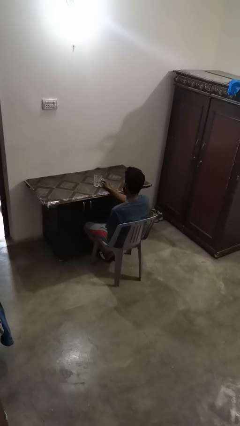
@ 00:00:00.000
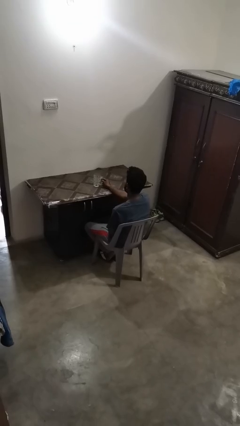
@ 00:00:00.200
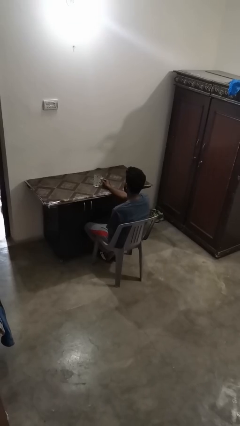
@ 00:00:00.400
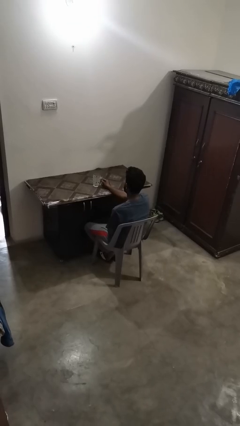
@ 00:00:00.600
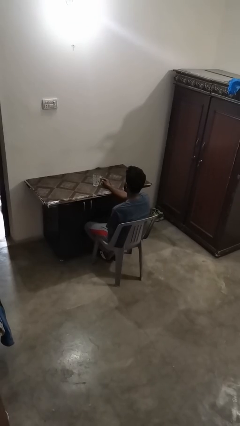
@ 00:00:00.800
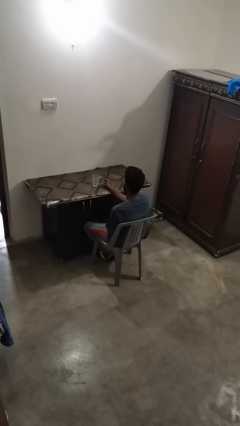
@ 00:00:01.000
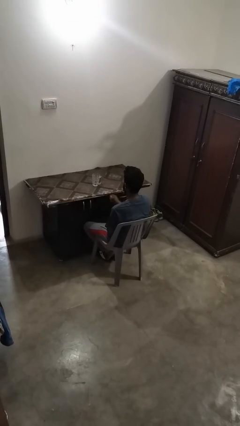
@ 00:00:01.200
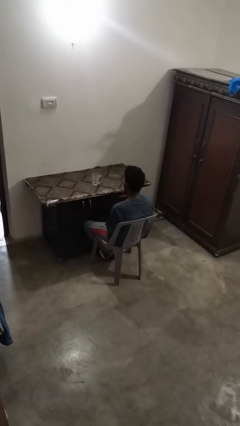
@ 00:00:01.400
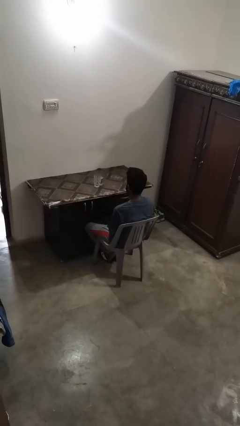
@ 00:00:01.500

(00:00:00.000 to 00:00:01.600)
person sets upright glass

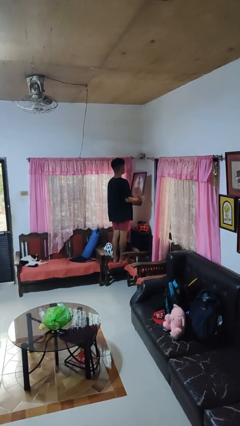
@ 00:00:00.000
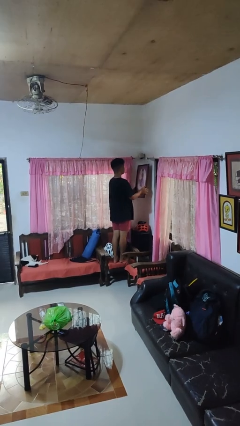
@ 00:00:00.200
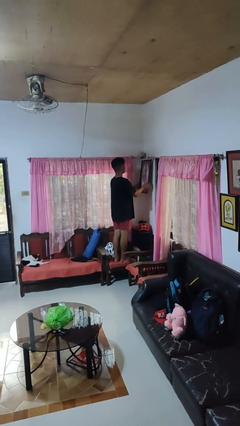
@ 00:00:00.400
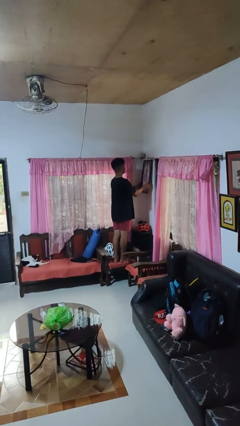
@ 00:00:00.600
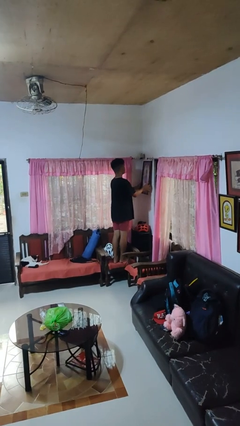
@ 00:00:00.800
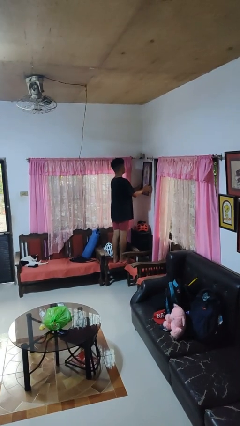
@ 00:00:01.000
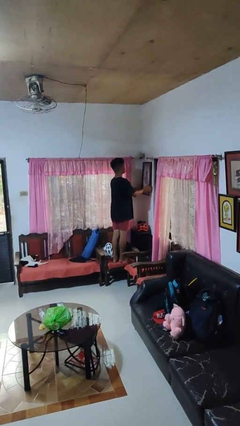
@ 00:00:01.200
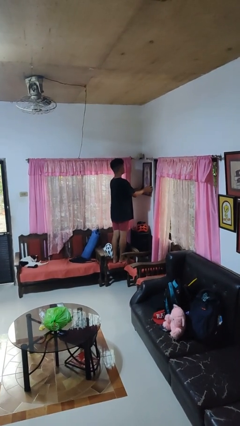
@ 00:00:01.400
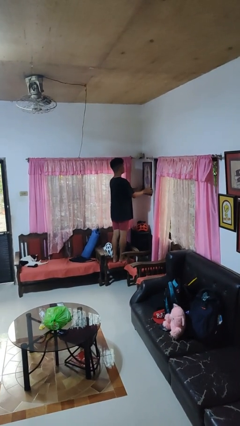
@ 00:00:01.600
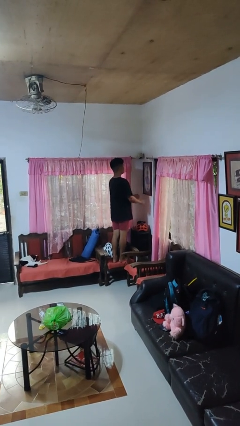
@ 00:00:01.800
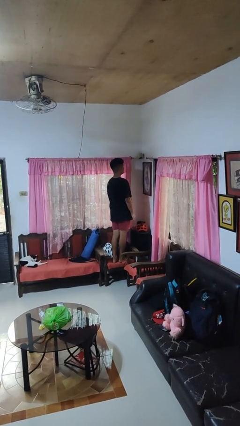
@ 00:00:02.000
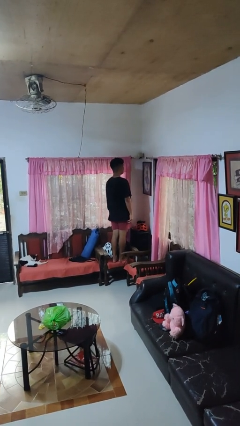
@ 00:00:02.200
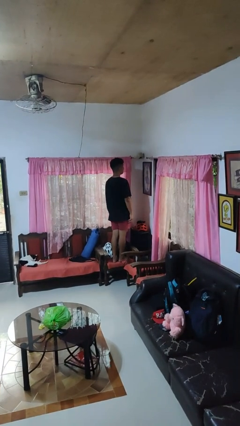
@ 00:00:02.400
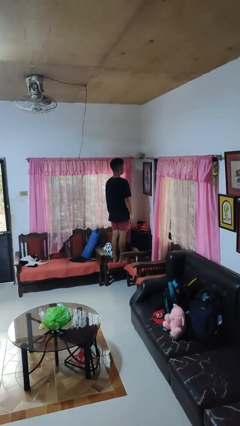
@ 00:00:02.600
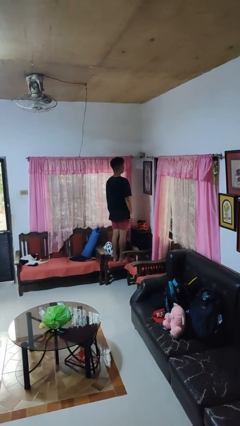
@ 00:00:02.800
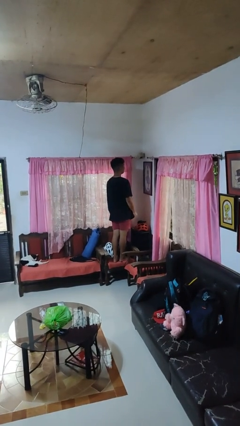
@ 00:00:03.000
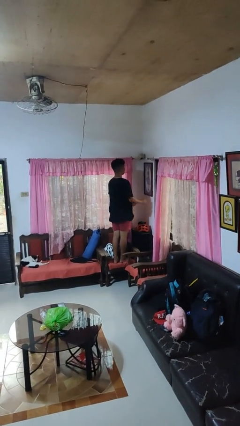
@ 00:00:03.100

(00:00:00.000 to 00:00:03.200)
person puts up picture frame

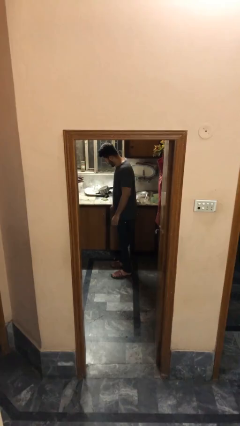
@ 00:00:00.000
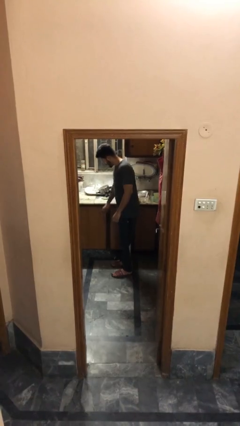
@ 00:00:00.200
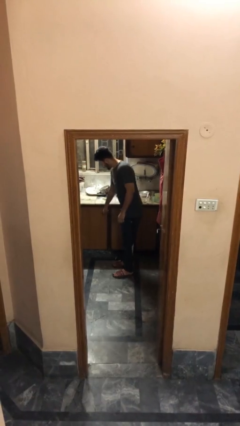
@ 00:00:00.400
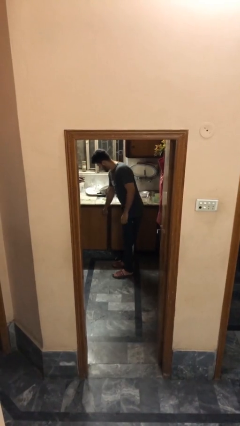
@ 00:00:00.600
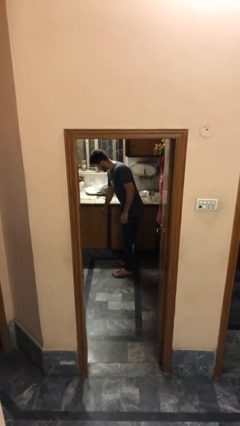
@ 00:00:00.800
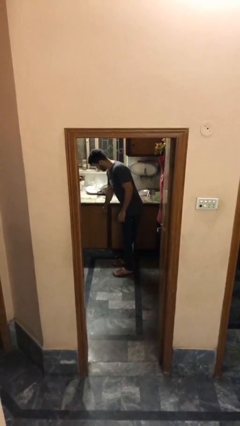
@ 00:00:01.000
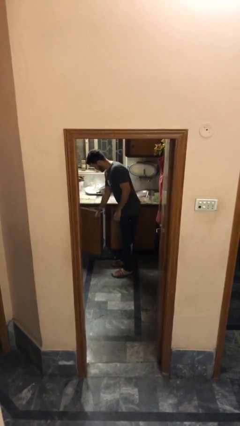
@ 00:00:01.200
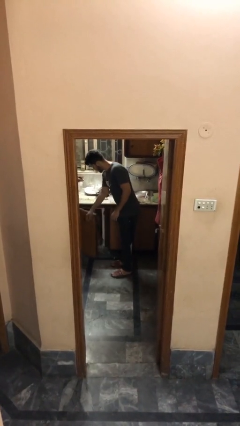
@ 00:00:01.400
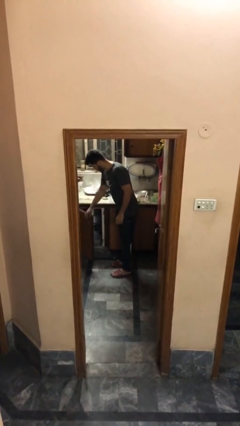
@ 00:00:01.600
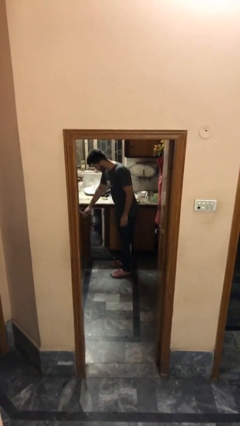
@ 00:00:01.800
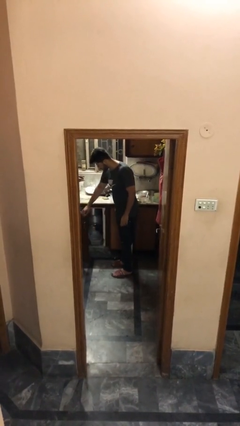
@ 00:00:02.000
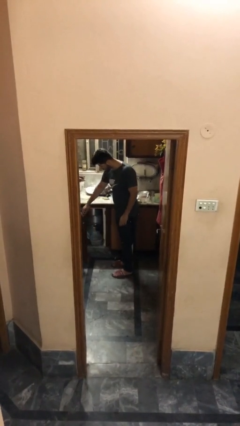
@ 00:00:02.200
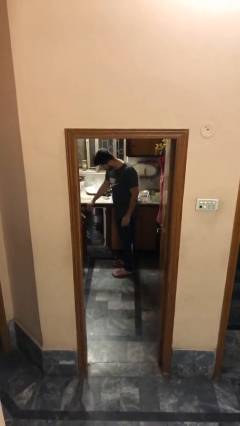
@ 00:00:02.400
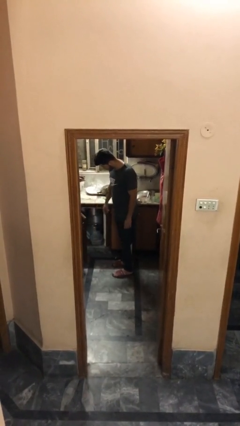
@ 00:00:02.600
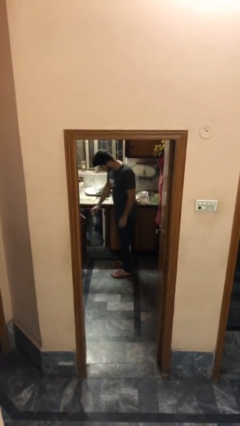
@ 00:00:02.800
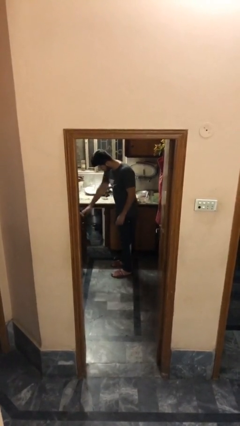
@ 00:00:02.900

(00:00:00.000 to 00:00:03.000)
person opens cabinet

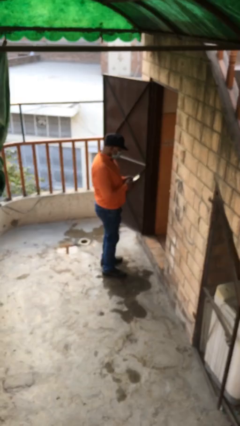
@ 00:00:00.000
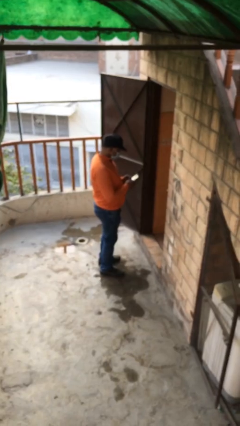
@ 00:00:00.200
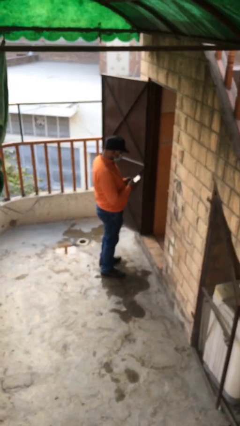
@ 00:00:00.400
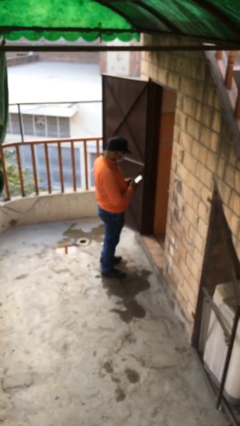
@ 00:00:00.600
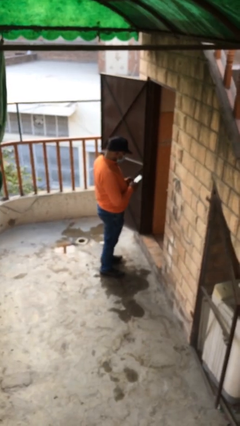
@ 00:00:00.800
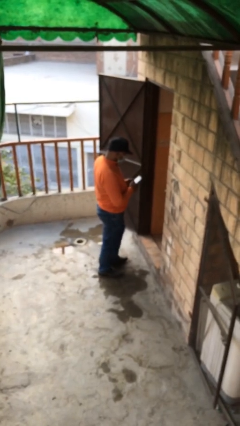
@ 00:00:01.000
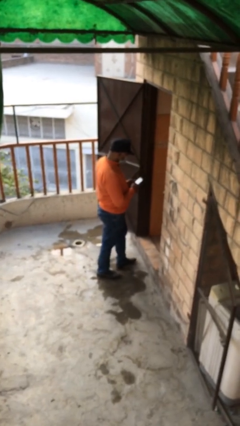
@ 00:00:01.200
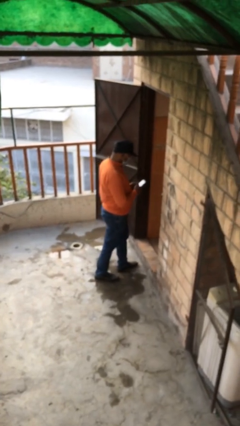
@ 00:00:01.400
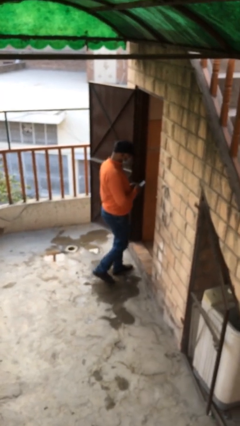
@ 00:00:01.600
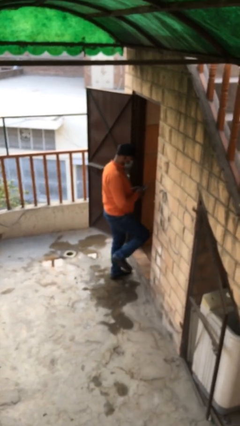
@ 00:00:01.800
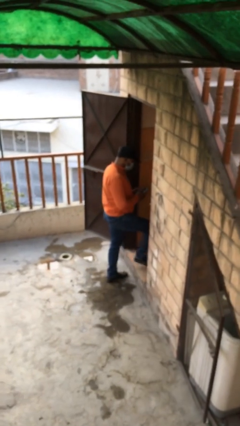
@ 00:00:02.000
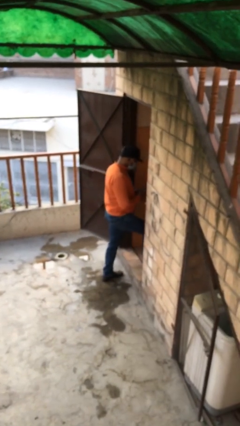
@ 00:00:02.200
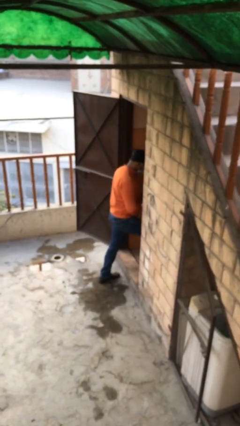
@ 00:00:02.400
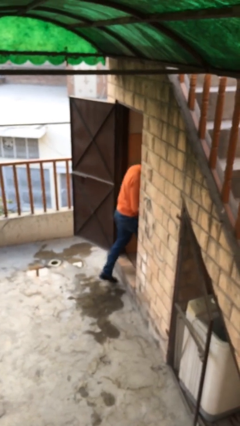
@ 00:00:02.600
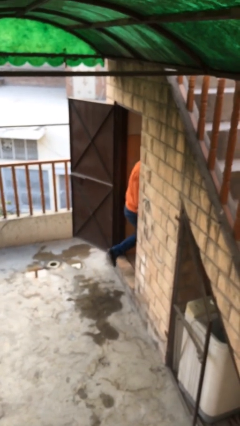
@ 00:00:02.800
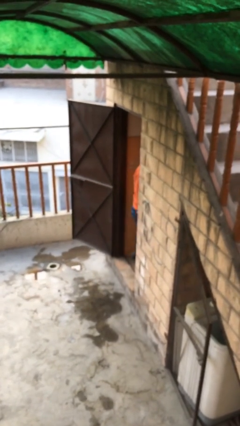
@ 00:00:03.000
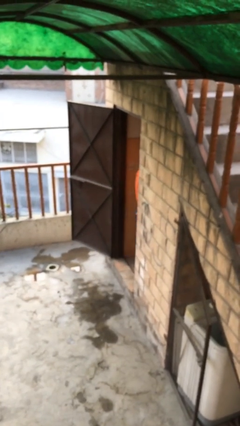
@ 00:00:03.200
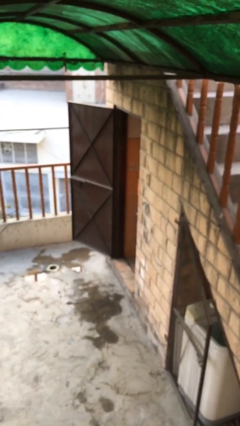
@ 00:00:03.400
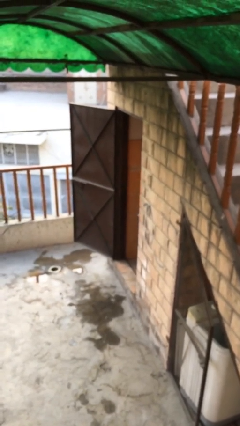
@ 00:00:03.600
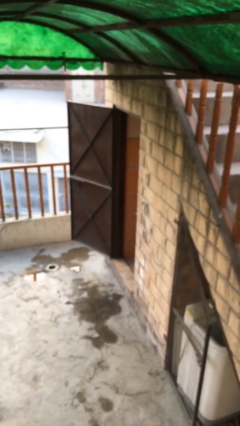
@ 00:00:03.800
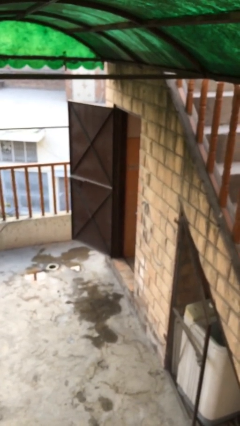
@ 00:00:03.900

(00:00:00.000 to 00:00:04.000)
person enters scene through structure

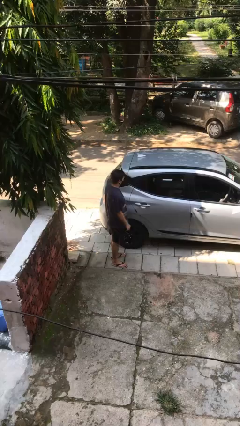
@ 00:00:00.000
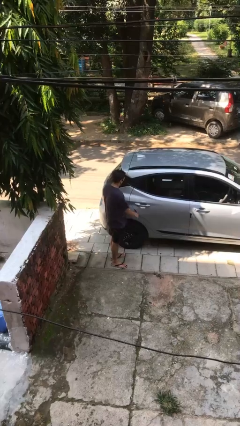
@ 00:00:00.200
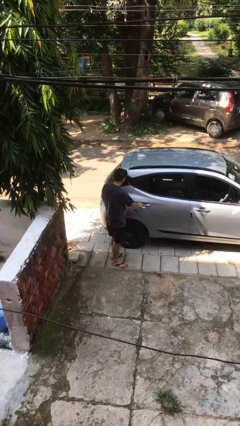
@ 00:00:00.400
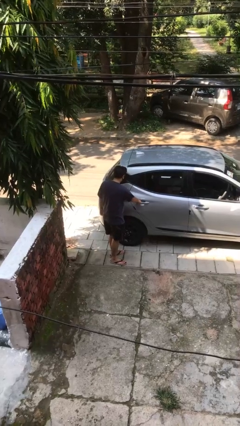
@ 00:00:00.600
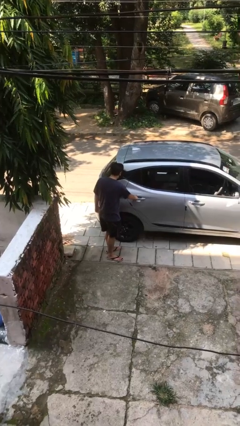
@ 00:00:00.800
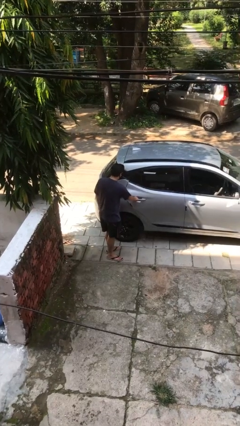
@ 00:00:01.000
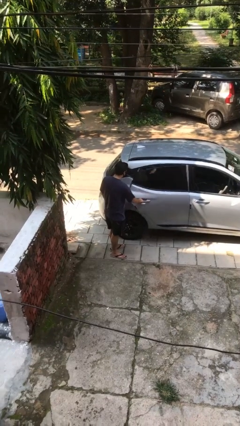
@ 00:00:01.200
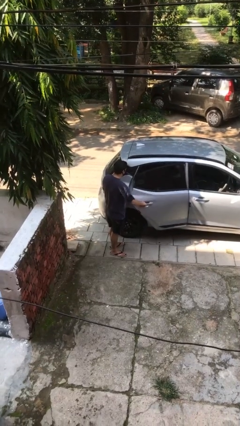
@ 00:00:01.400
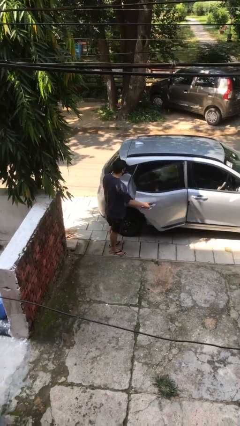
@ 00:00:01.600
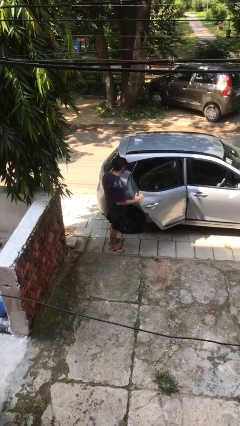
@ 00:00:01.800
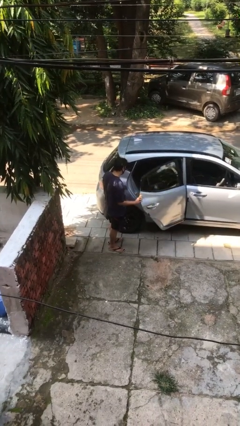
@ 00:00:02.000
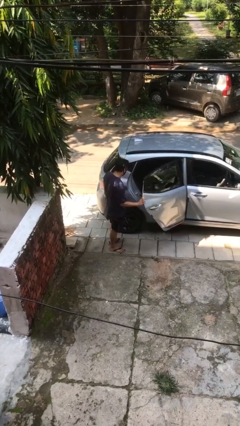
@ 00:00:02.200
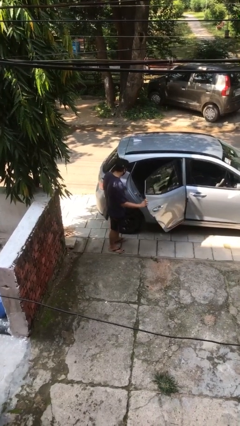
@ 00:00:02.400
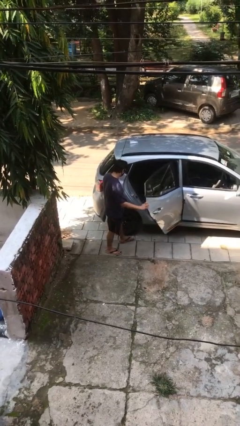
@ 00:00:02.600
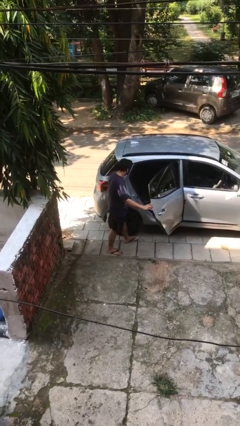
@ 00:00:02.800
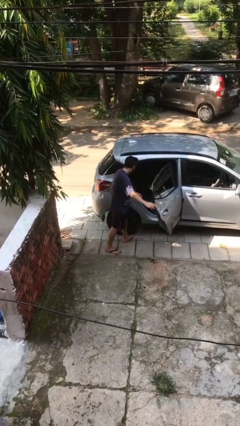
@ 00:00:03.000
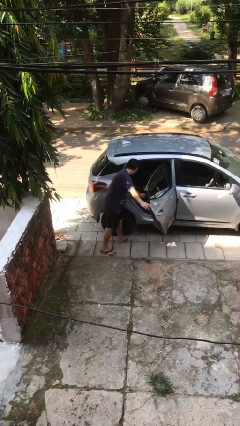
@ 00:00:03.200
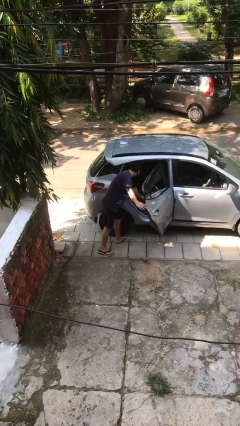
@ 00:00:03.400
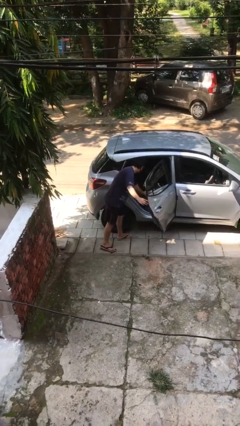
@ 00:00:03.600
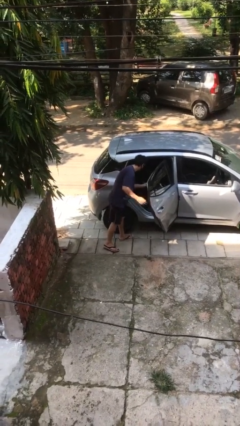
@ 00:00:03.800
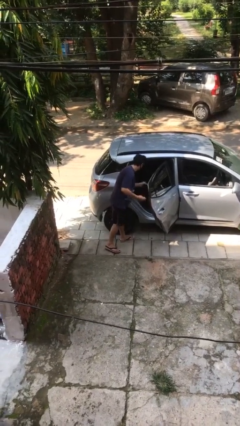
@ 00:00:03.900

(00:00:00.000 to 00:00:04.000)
person opens car door

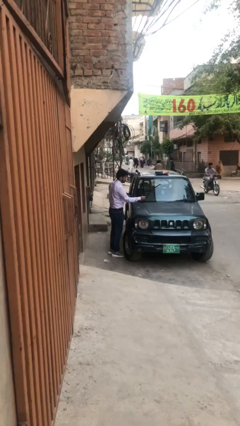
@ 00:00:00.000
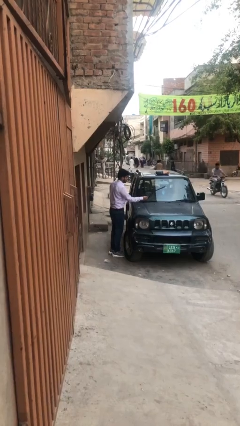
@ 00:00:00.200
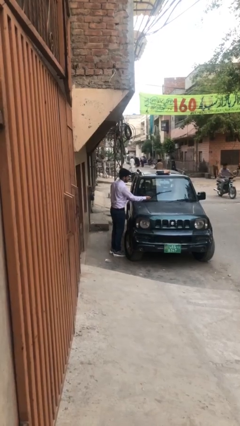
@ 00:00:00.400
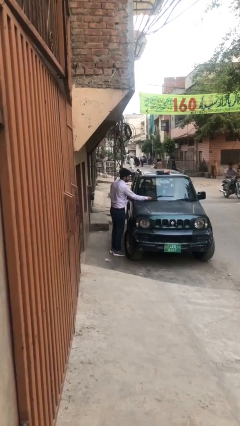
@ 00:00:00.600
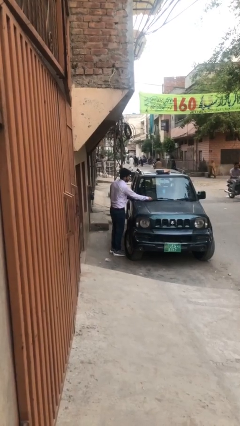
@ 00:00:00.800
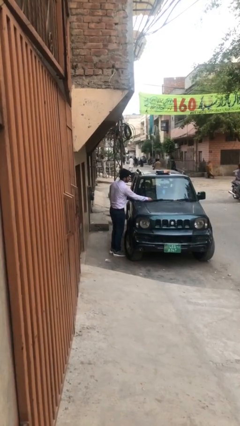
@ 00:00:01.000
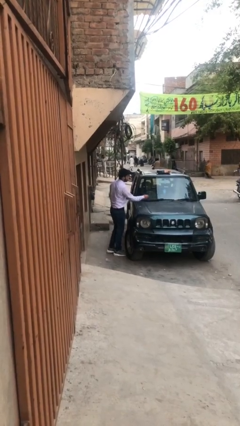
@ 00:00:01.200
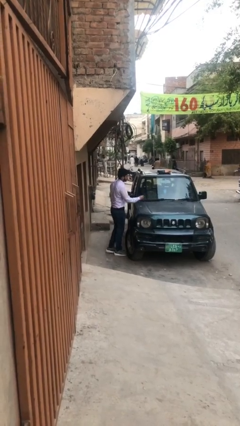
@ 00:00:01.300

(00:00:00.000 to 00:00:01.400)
person flips down car wipers
